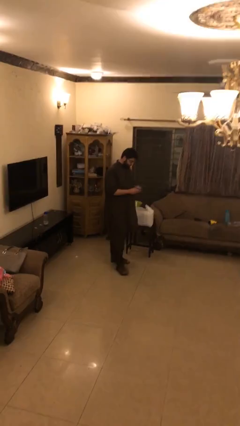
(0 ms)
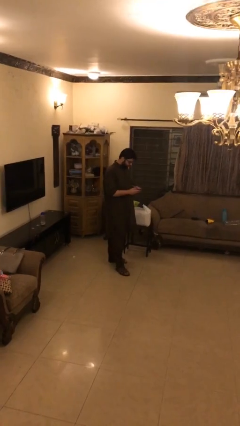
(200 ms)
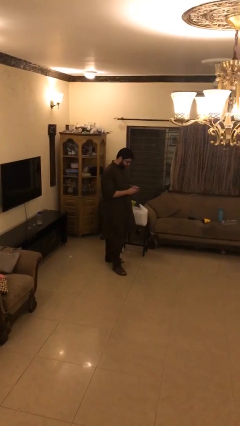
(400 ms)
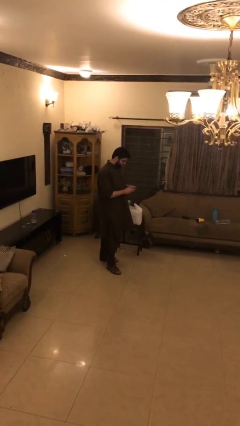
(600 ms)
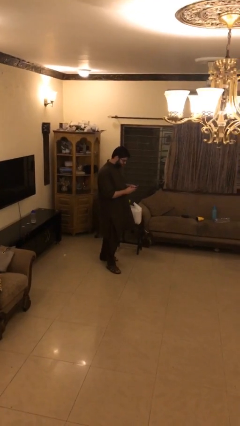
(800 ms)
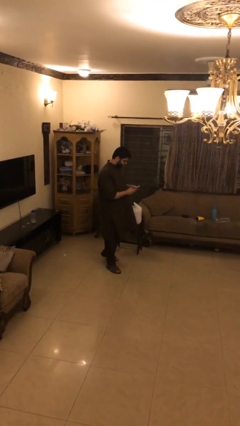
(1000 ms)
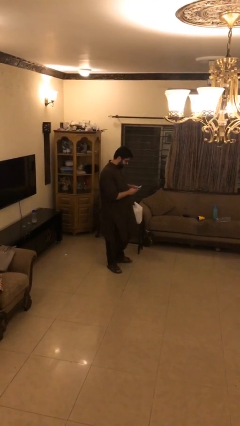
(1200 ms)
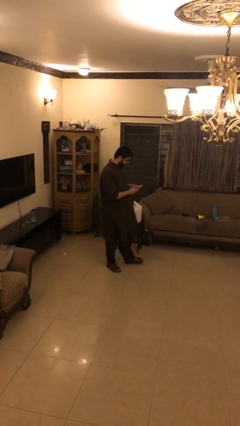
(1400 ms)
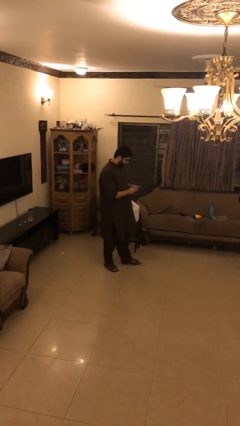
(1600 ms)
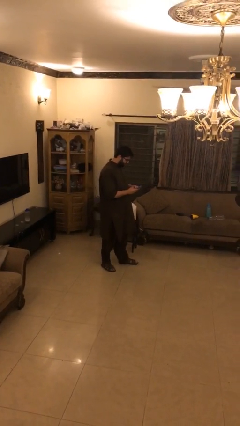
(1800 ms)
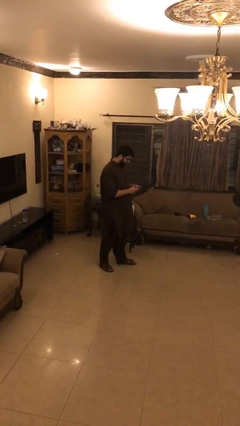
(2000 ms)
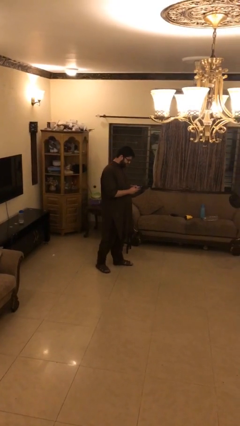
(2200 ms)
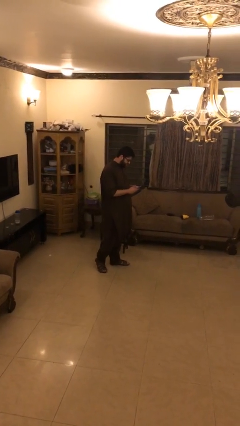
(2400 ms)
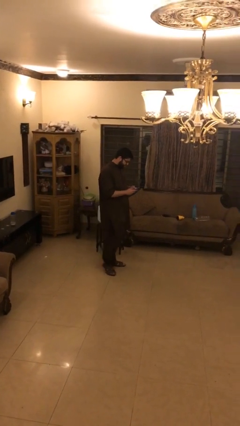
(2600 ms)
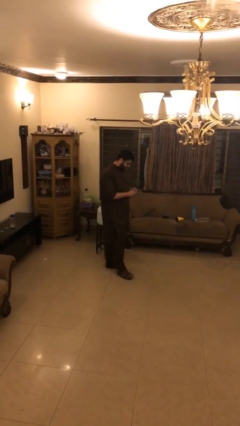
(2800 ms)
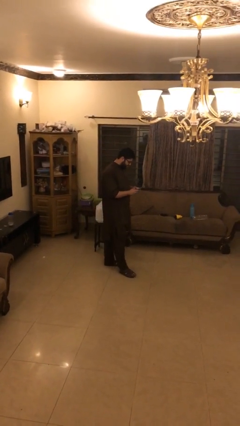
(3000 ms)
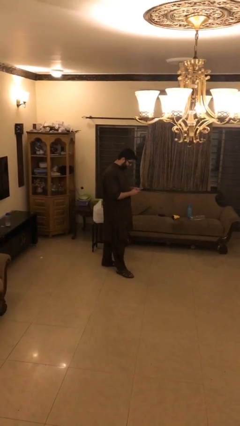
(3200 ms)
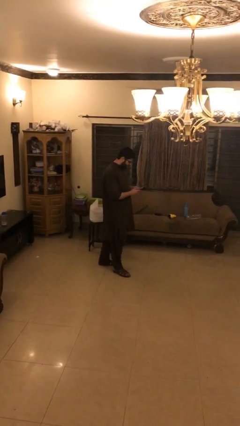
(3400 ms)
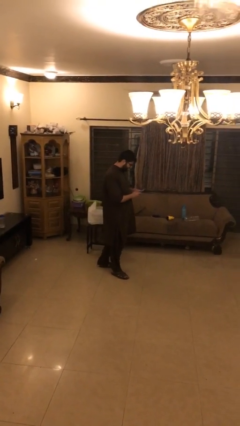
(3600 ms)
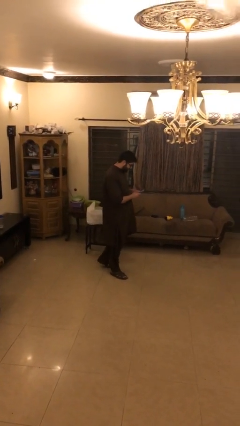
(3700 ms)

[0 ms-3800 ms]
person texts on phone

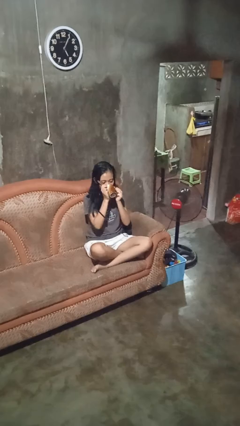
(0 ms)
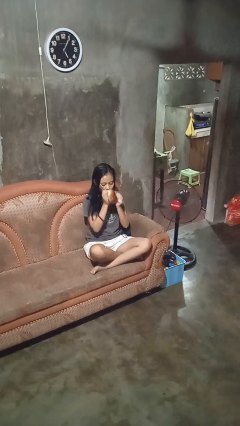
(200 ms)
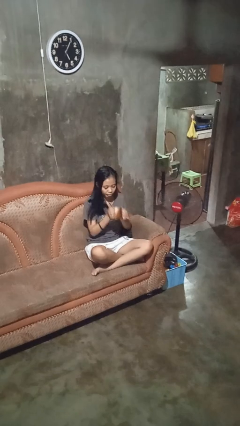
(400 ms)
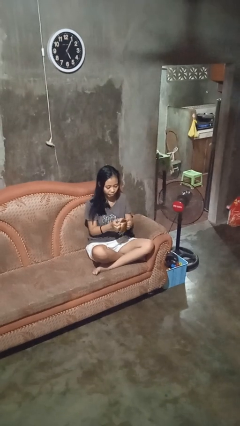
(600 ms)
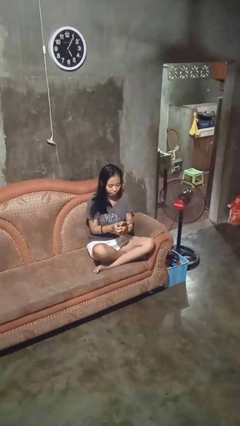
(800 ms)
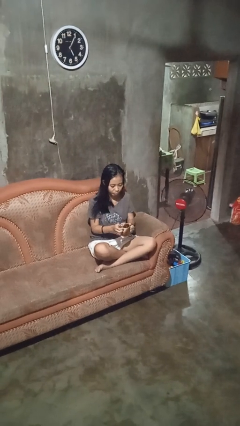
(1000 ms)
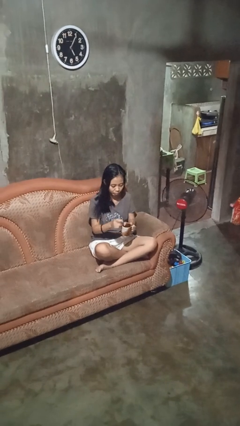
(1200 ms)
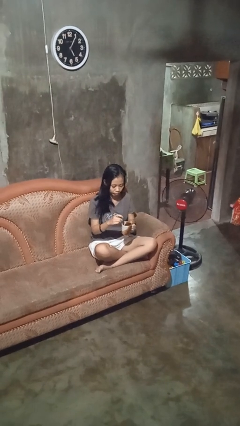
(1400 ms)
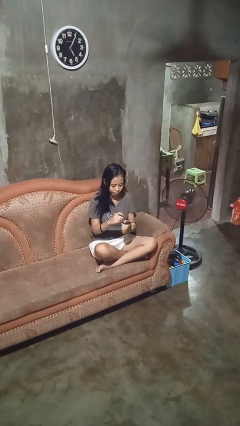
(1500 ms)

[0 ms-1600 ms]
person stirs mug

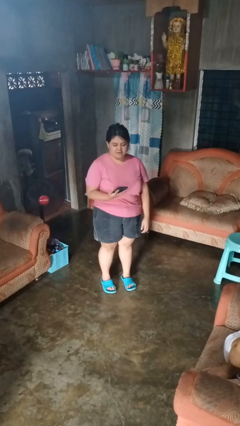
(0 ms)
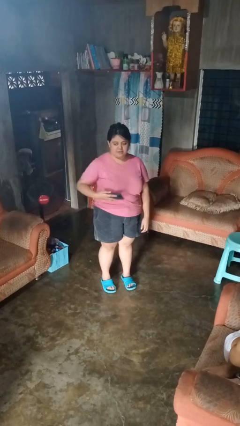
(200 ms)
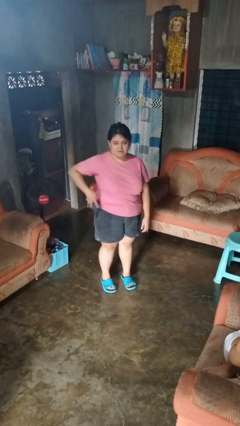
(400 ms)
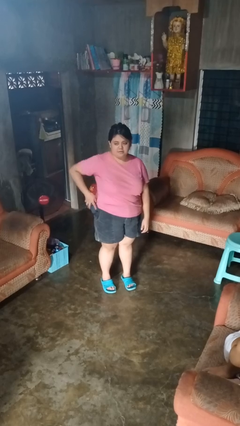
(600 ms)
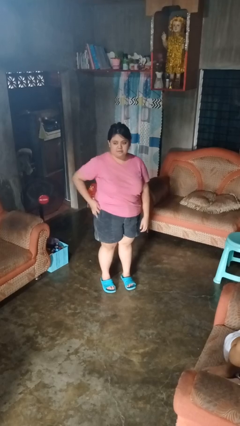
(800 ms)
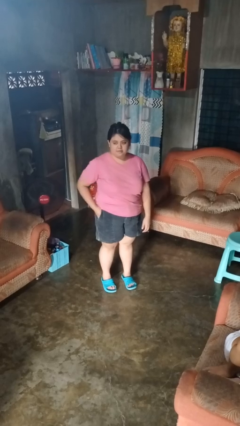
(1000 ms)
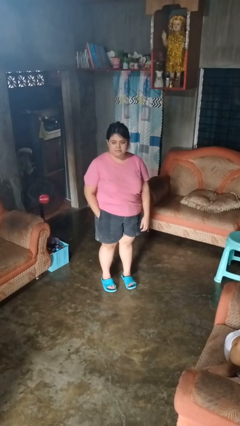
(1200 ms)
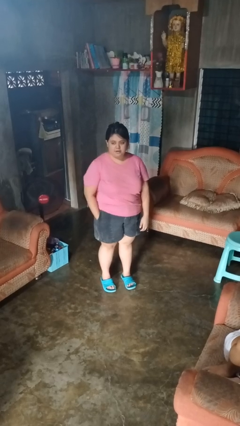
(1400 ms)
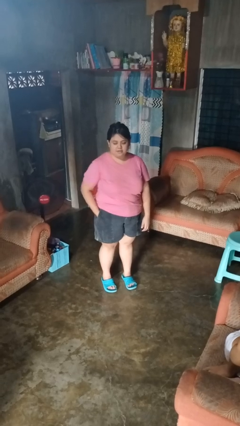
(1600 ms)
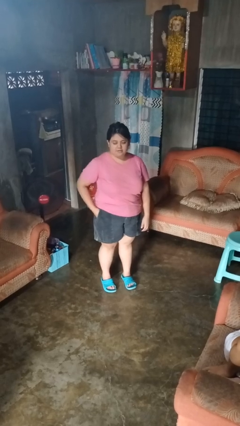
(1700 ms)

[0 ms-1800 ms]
person puts phone into pocket

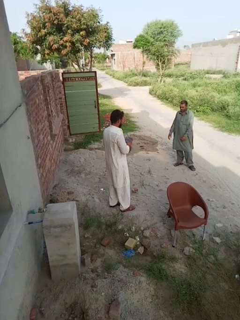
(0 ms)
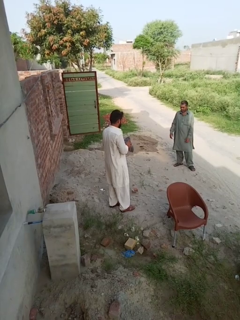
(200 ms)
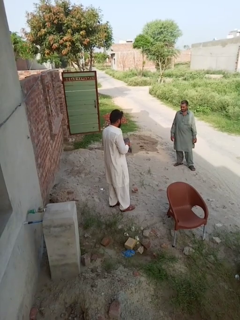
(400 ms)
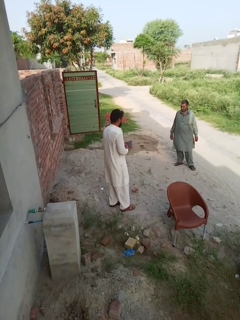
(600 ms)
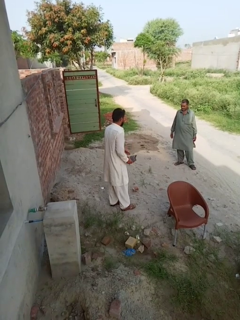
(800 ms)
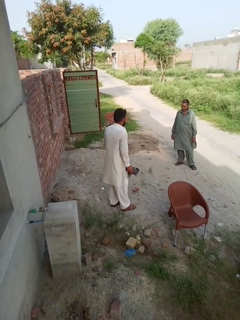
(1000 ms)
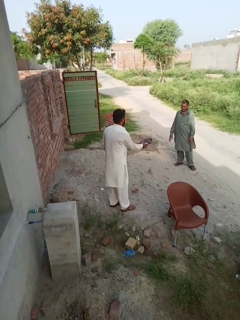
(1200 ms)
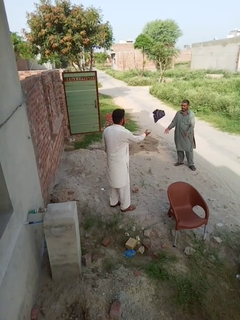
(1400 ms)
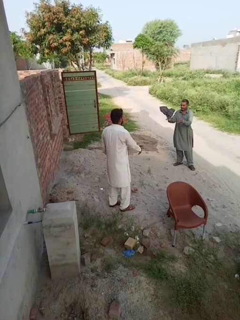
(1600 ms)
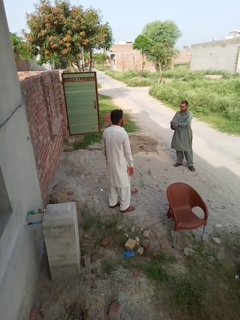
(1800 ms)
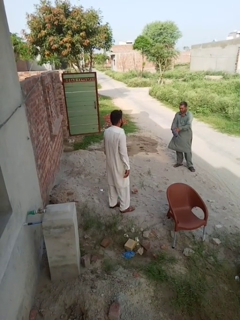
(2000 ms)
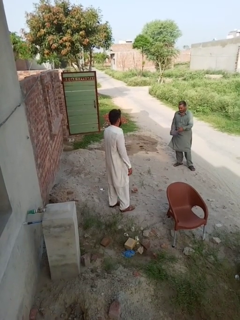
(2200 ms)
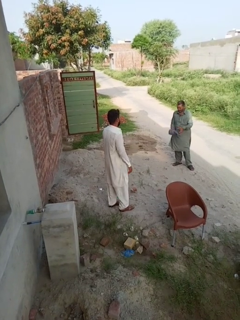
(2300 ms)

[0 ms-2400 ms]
person throws object to person

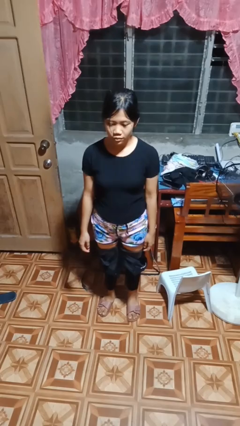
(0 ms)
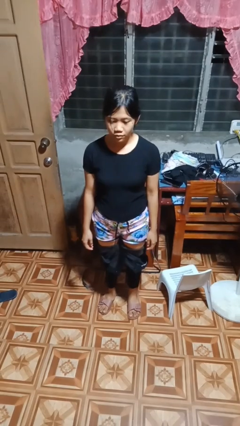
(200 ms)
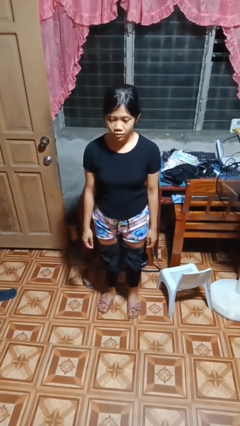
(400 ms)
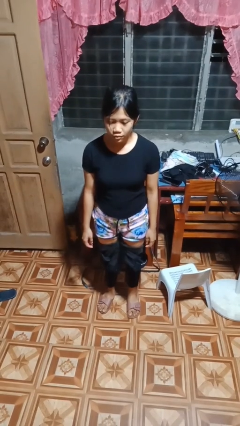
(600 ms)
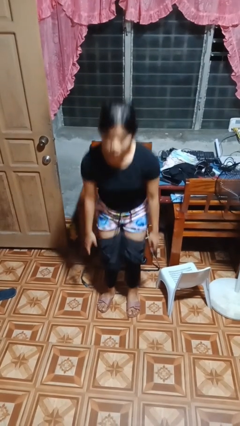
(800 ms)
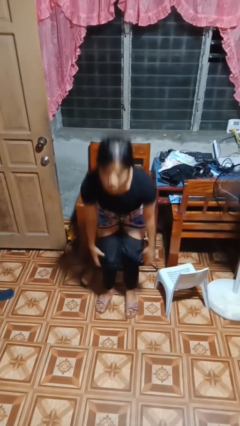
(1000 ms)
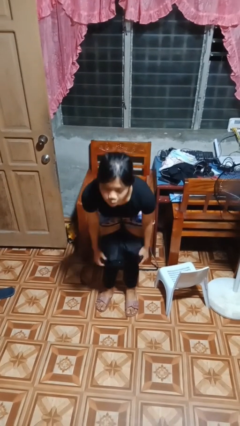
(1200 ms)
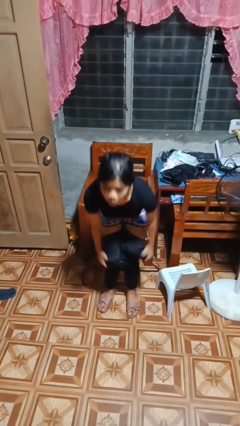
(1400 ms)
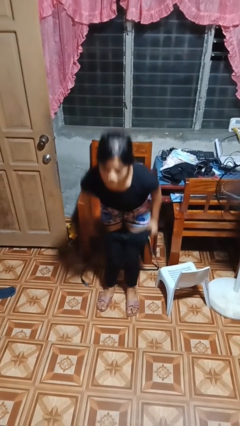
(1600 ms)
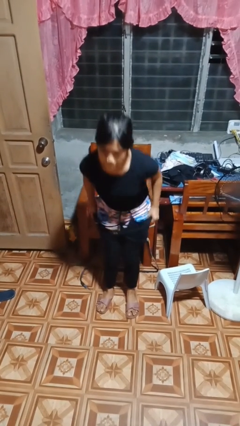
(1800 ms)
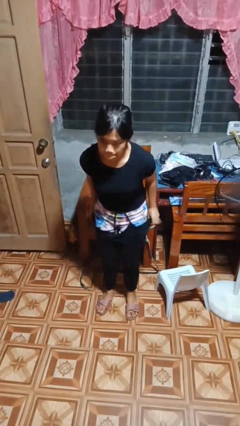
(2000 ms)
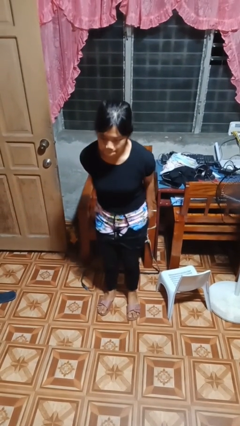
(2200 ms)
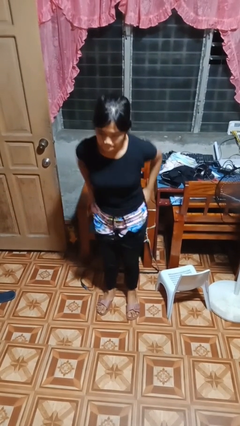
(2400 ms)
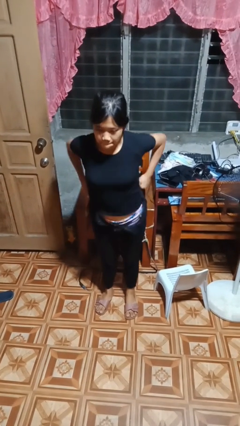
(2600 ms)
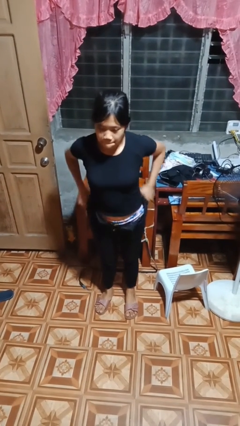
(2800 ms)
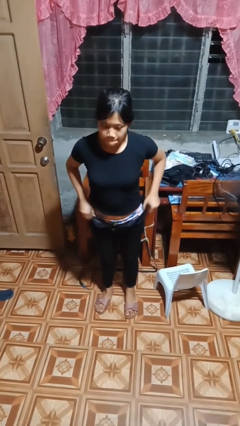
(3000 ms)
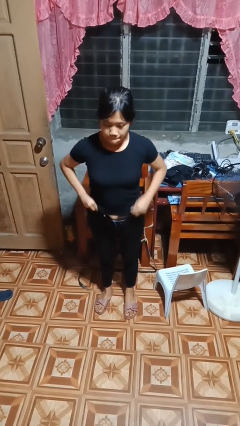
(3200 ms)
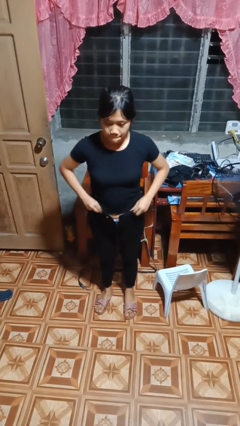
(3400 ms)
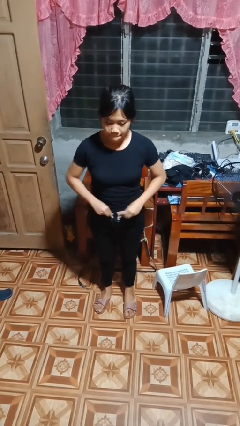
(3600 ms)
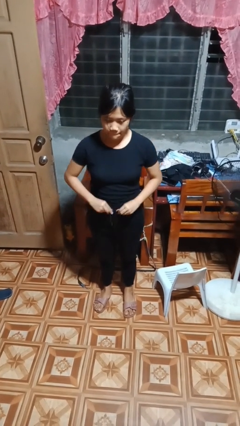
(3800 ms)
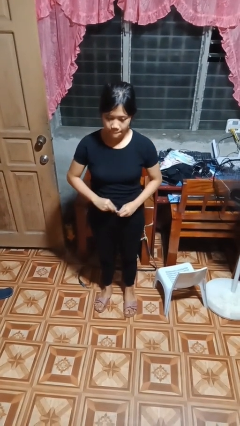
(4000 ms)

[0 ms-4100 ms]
person puts on pants

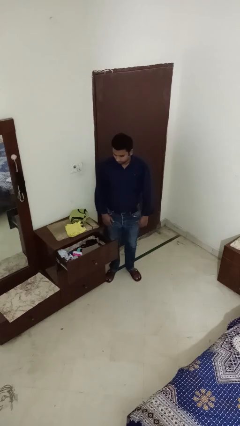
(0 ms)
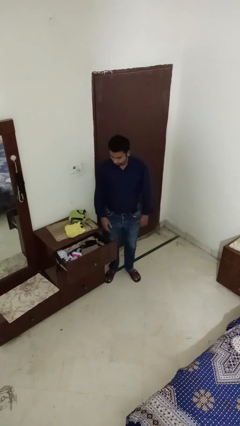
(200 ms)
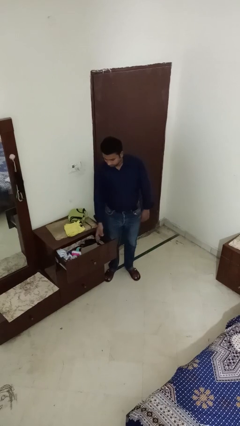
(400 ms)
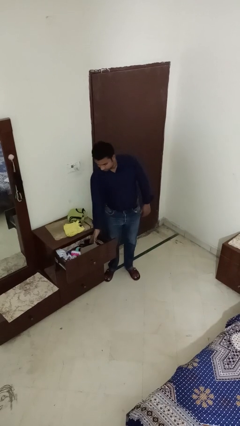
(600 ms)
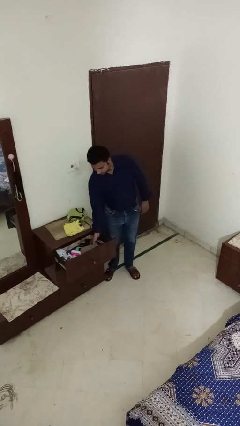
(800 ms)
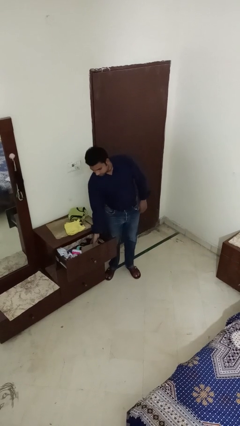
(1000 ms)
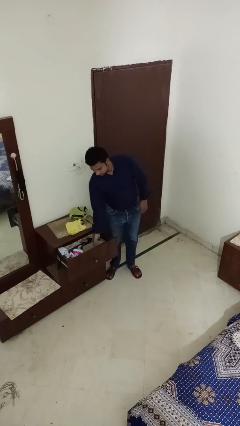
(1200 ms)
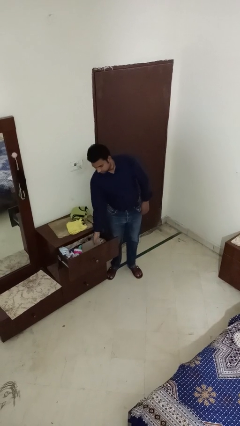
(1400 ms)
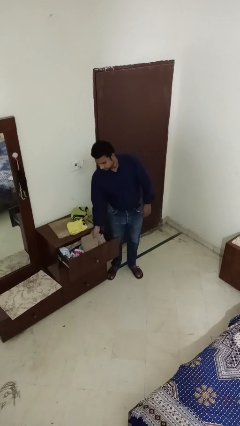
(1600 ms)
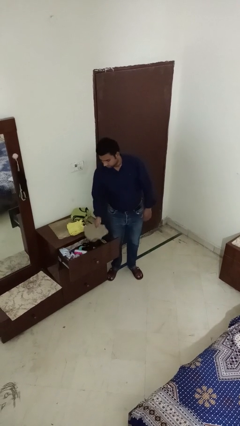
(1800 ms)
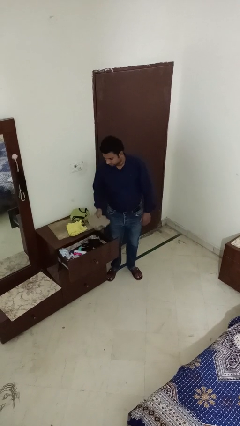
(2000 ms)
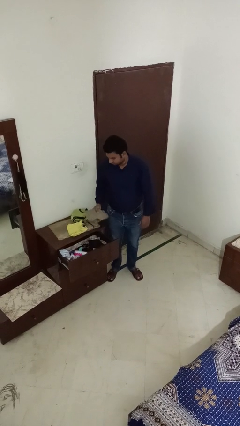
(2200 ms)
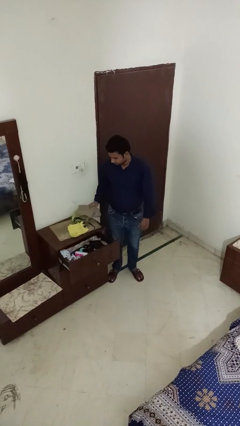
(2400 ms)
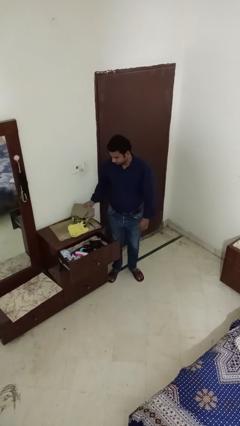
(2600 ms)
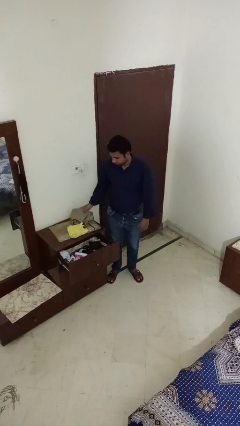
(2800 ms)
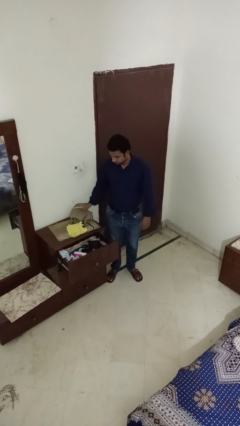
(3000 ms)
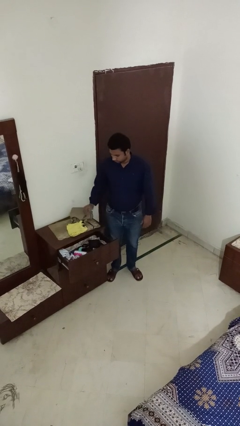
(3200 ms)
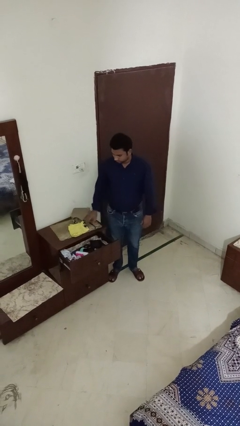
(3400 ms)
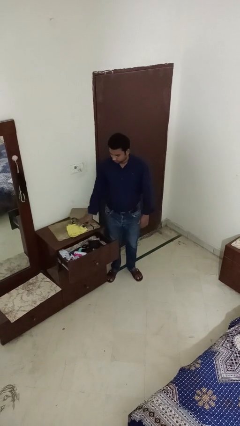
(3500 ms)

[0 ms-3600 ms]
person takes clothes from dresser

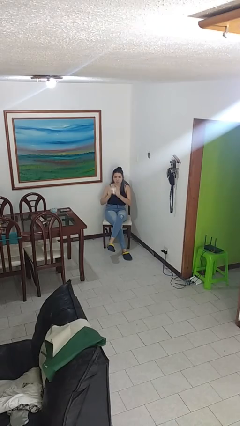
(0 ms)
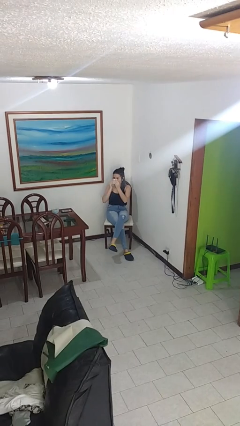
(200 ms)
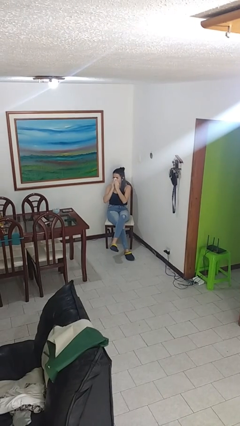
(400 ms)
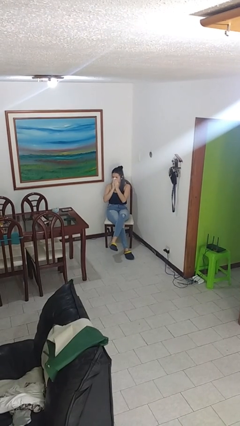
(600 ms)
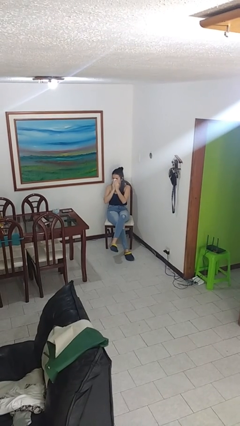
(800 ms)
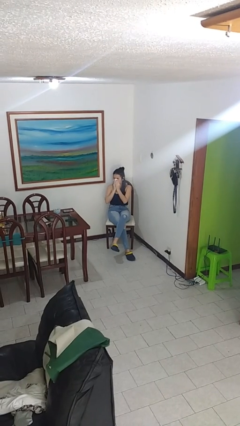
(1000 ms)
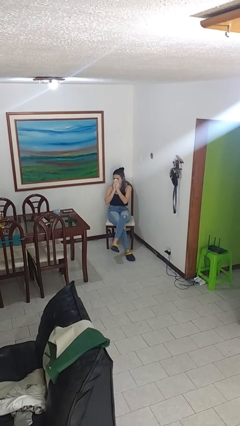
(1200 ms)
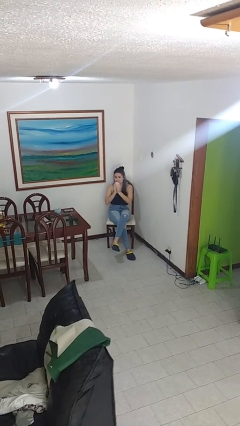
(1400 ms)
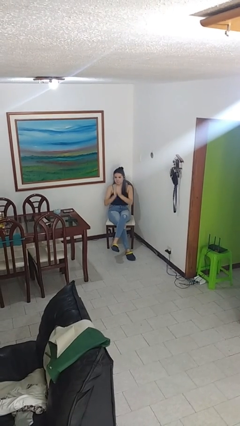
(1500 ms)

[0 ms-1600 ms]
person blows nose
